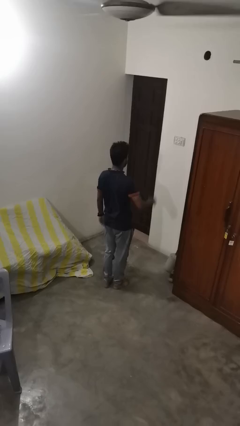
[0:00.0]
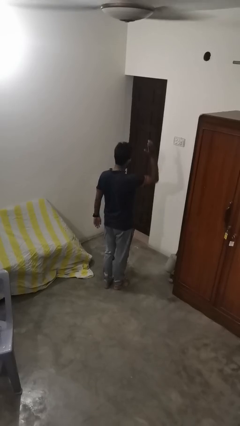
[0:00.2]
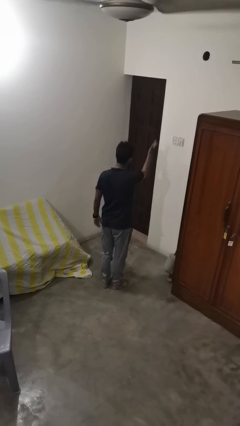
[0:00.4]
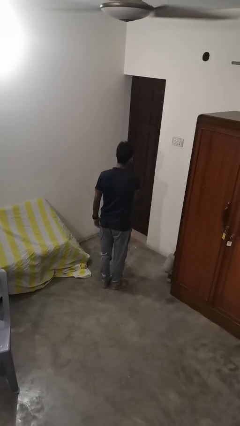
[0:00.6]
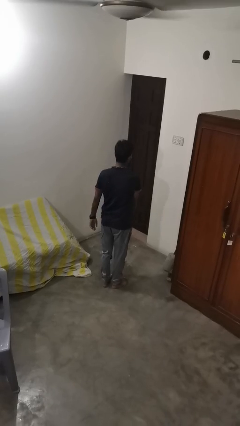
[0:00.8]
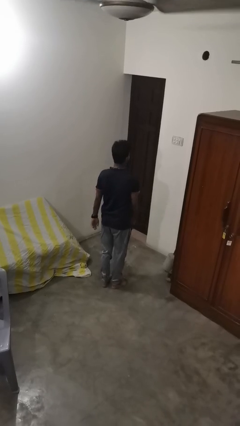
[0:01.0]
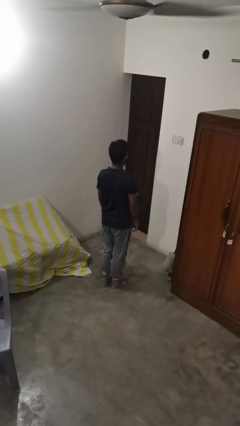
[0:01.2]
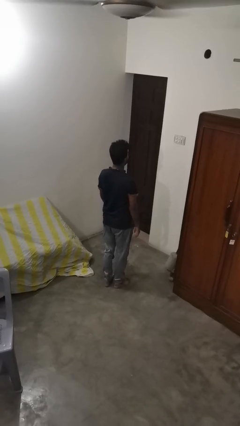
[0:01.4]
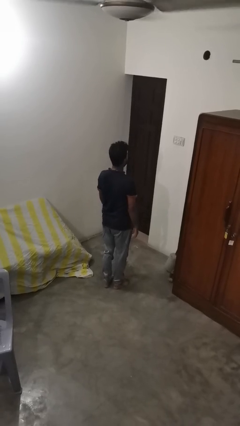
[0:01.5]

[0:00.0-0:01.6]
person karate chop

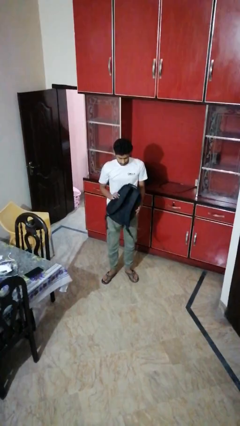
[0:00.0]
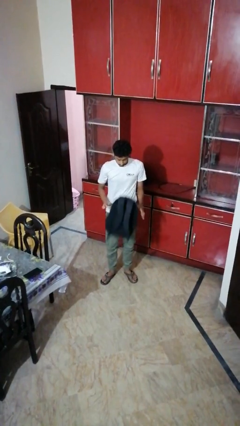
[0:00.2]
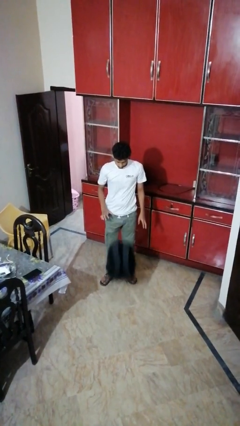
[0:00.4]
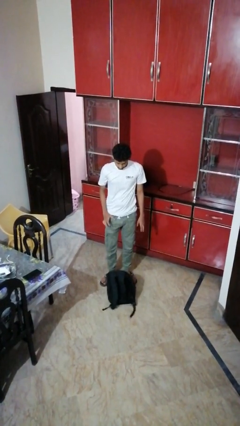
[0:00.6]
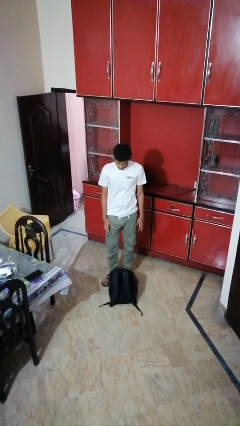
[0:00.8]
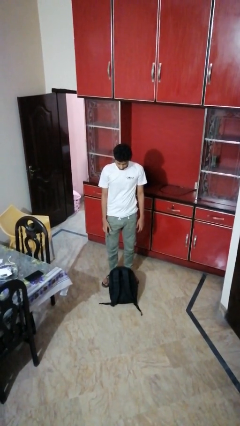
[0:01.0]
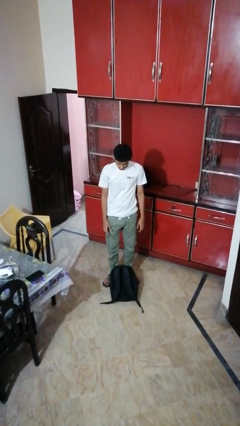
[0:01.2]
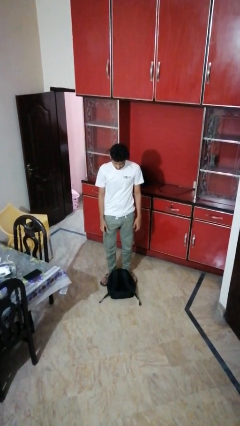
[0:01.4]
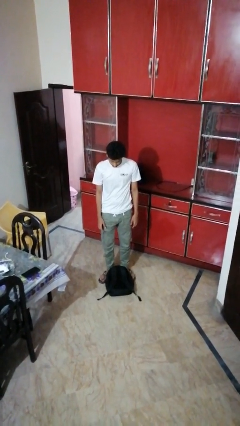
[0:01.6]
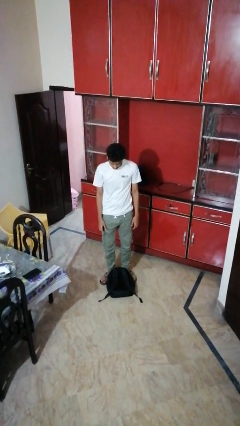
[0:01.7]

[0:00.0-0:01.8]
person drops object

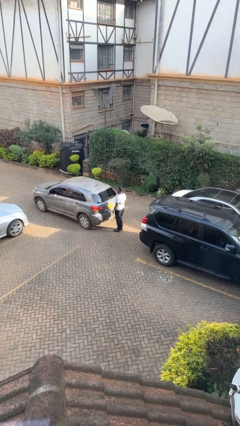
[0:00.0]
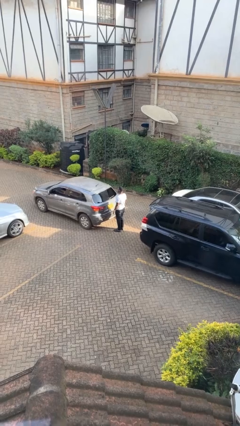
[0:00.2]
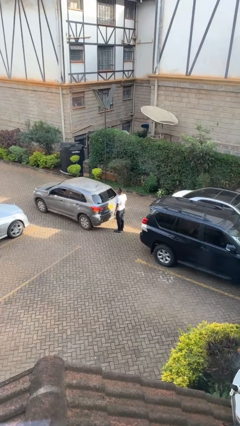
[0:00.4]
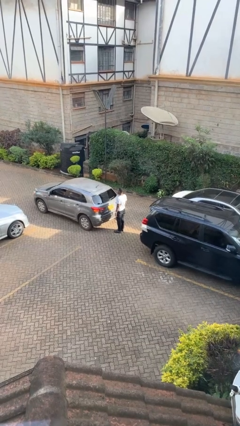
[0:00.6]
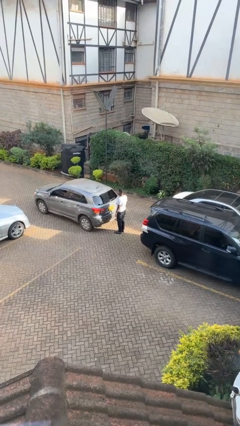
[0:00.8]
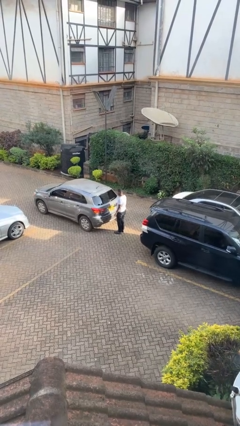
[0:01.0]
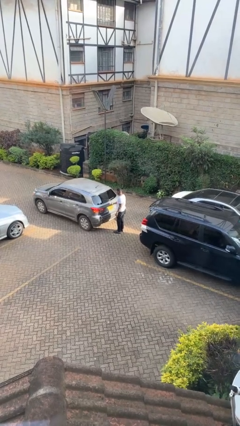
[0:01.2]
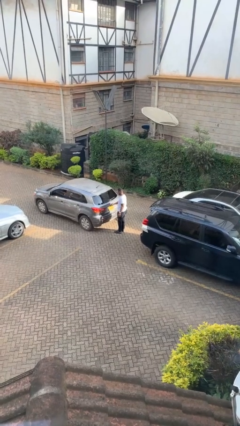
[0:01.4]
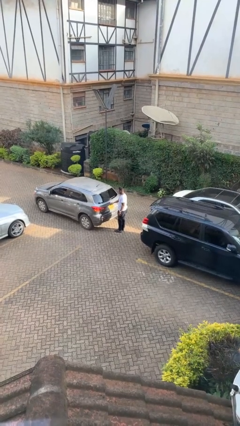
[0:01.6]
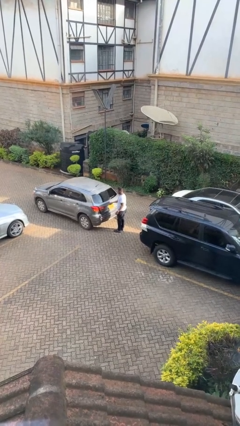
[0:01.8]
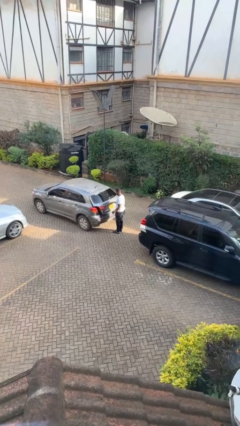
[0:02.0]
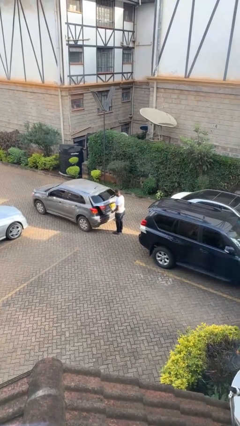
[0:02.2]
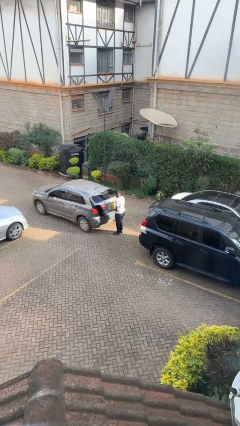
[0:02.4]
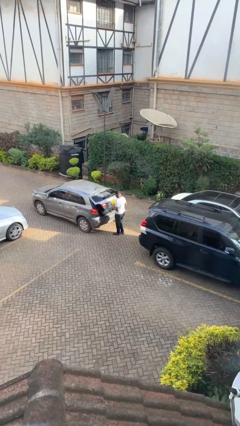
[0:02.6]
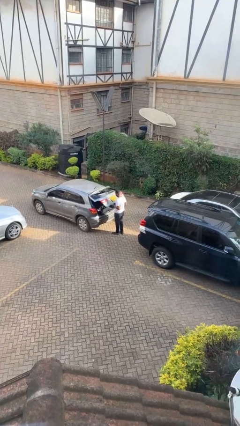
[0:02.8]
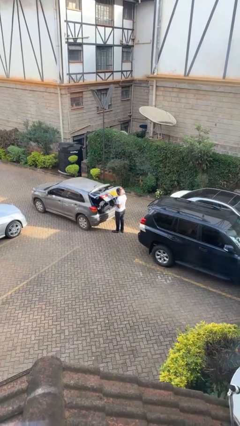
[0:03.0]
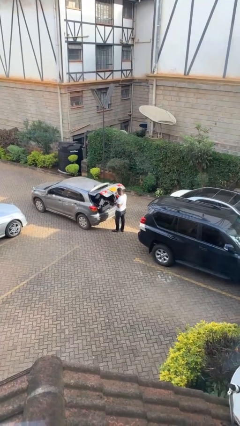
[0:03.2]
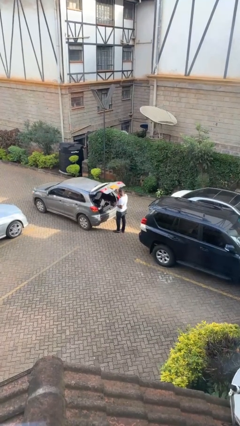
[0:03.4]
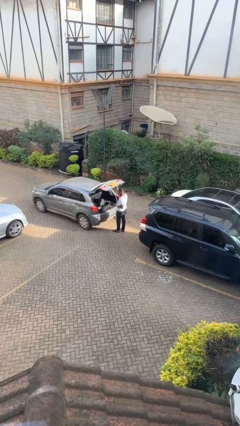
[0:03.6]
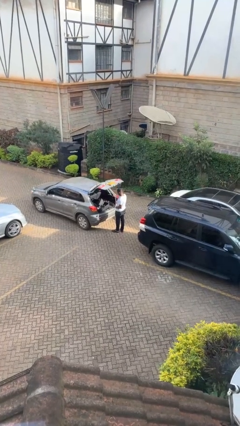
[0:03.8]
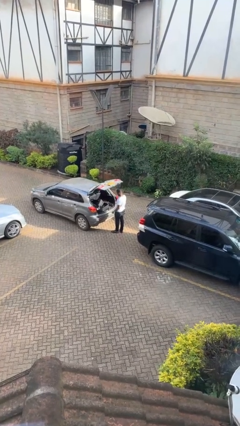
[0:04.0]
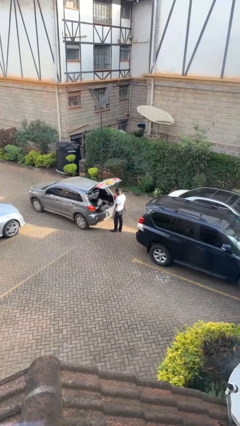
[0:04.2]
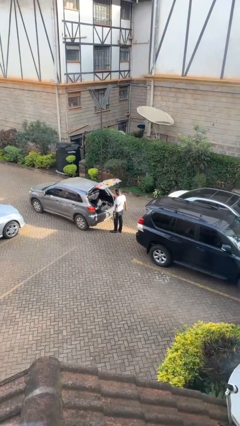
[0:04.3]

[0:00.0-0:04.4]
person opens car trunk

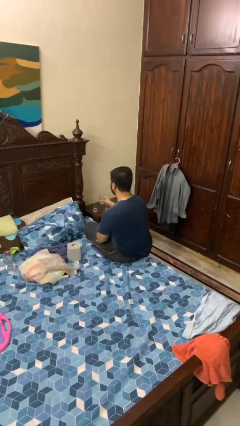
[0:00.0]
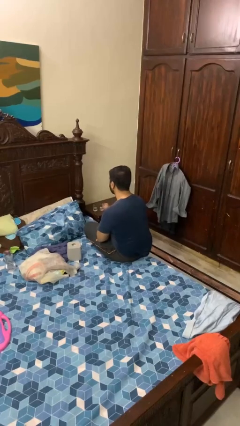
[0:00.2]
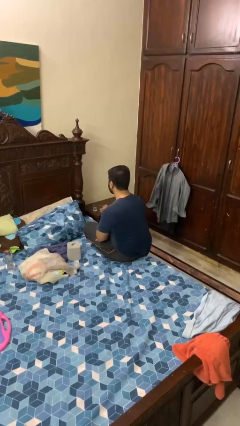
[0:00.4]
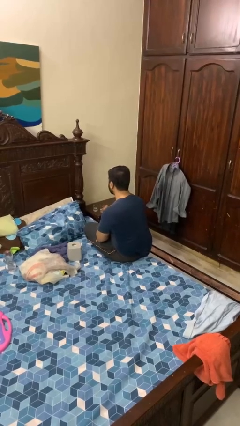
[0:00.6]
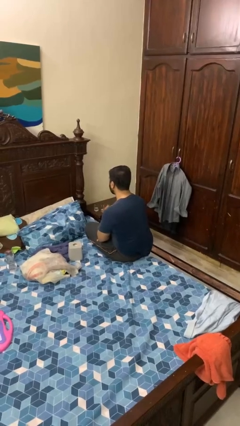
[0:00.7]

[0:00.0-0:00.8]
person puts down object on table

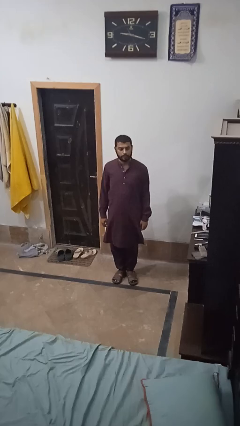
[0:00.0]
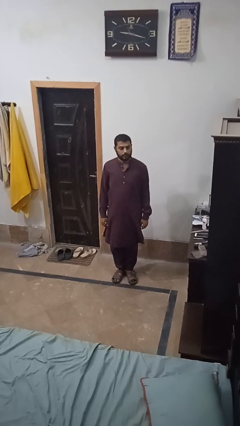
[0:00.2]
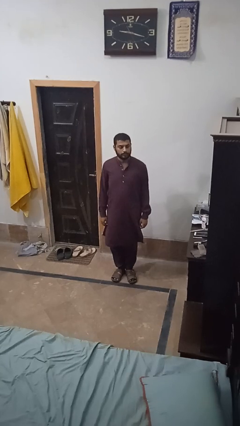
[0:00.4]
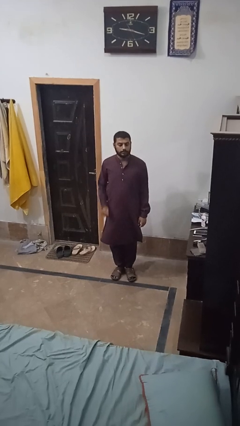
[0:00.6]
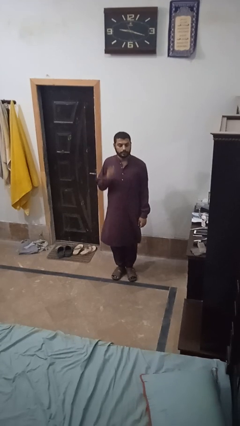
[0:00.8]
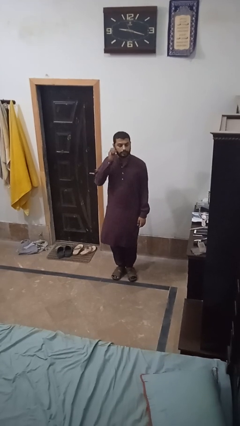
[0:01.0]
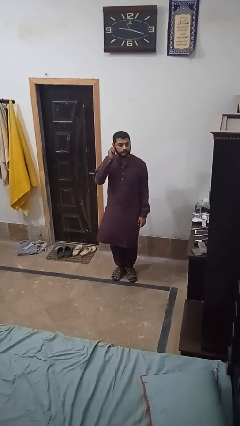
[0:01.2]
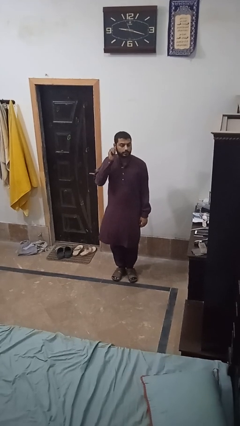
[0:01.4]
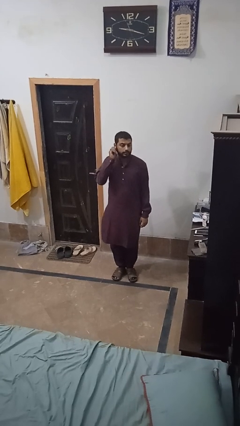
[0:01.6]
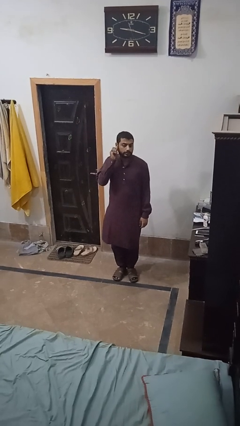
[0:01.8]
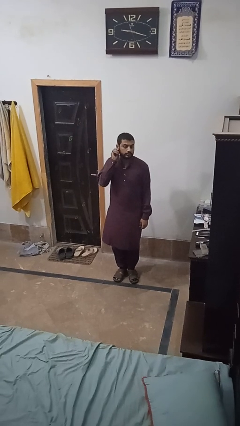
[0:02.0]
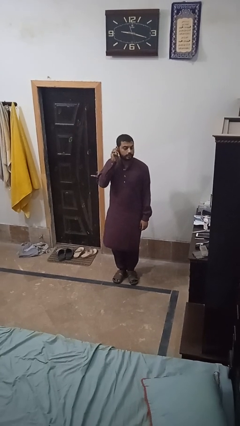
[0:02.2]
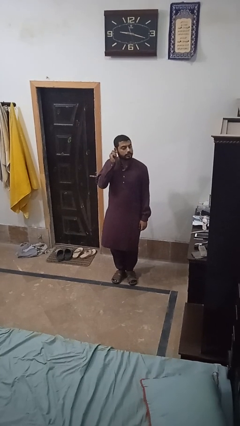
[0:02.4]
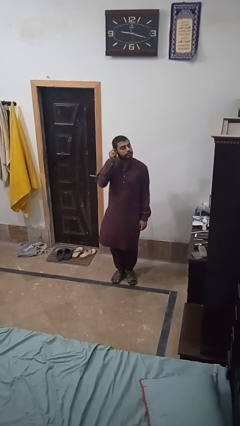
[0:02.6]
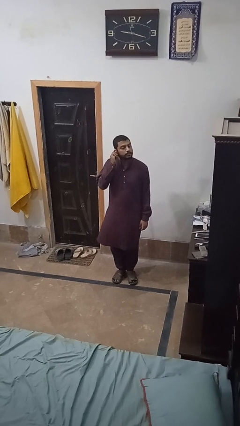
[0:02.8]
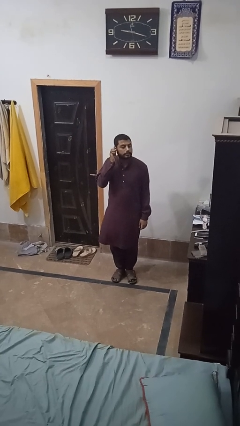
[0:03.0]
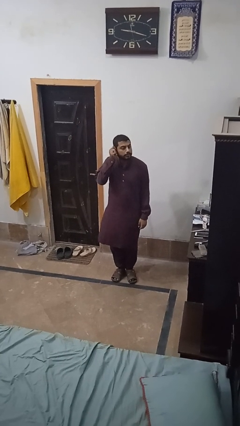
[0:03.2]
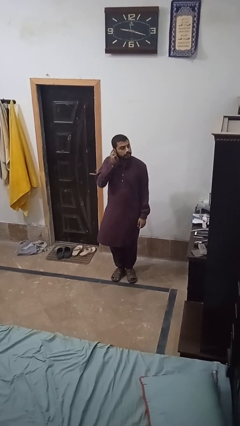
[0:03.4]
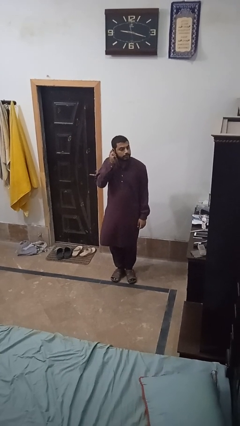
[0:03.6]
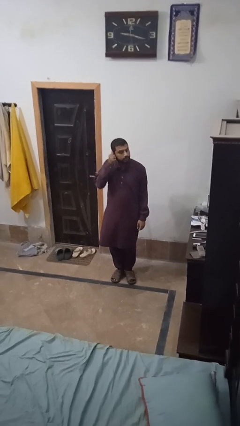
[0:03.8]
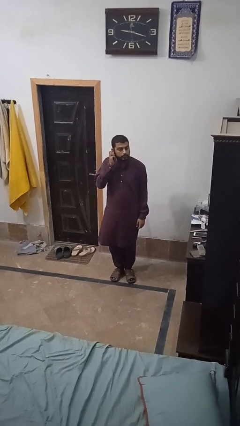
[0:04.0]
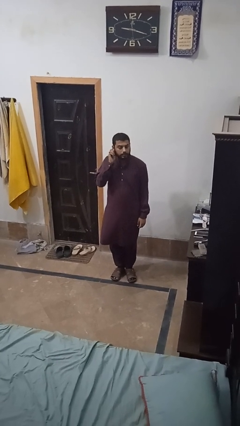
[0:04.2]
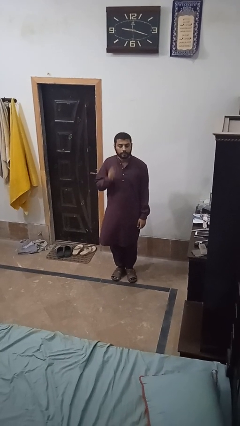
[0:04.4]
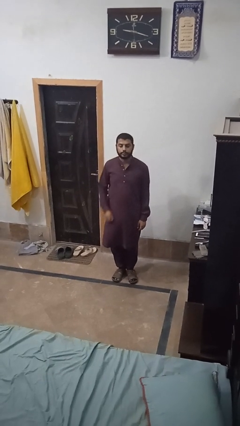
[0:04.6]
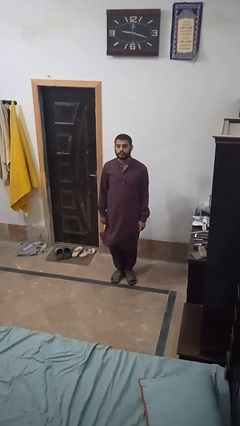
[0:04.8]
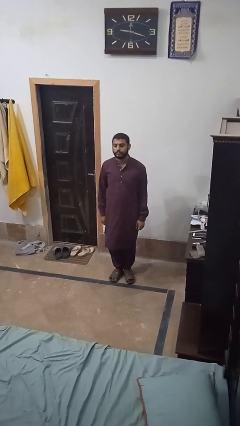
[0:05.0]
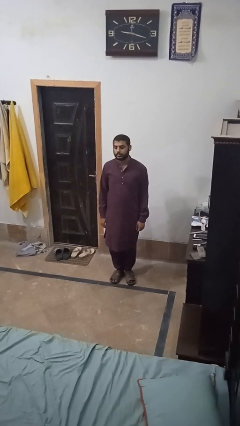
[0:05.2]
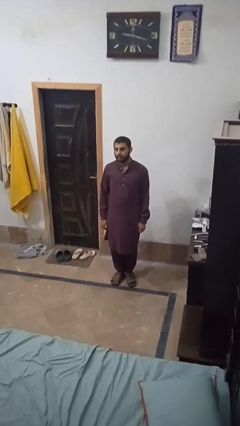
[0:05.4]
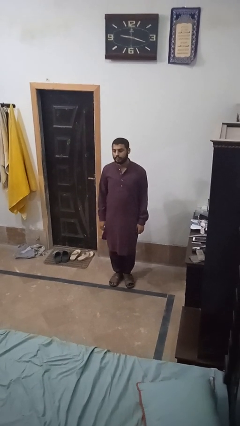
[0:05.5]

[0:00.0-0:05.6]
person touches earlobe

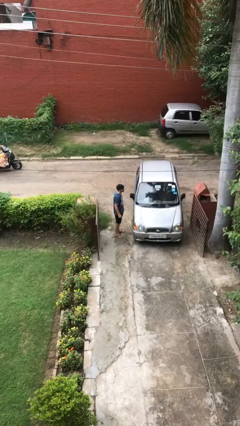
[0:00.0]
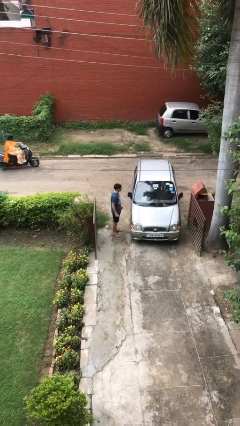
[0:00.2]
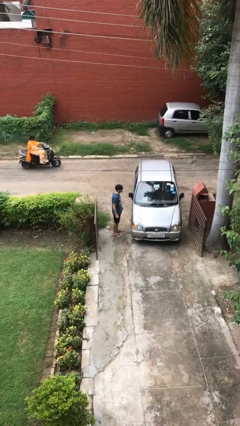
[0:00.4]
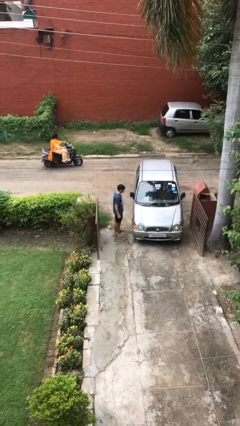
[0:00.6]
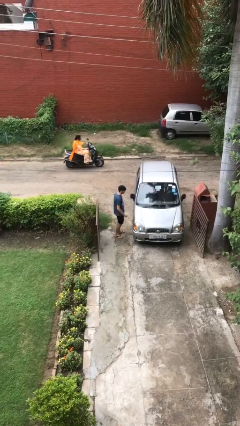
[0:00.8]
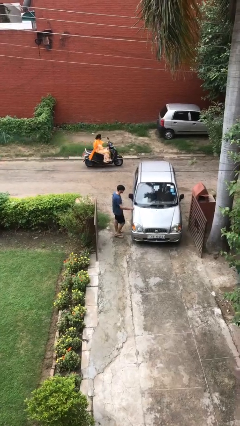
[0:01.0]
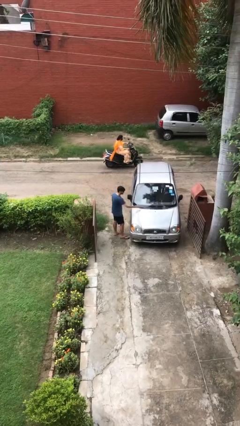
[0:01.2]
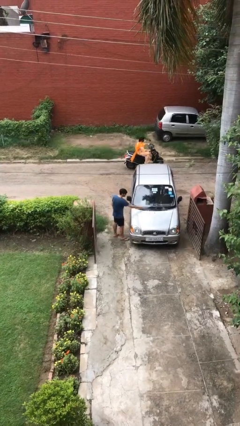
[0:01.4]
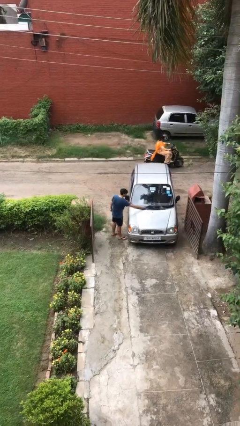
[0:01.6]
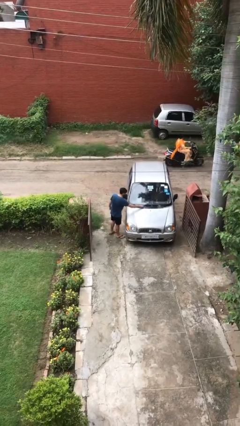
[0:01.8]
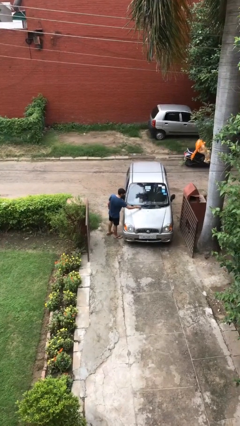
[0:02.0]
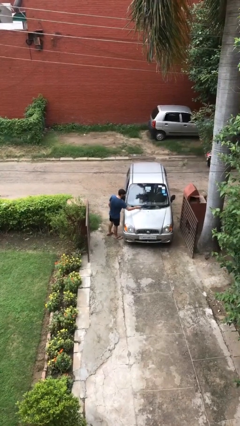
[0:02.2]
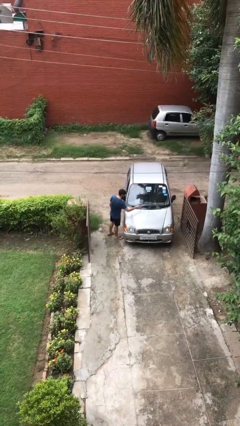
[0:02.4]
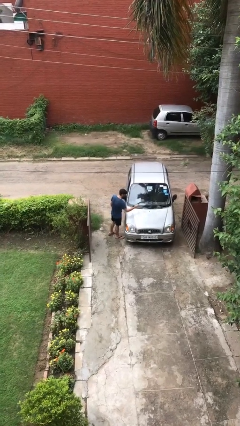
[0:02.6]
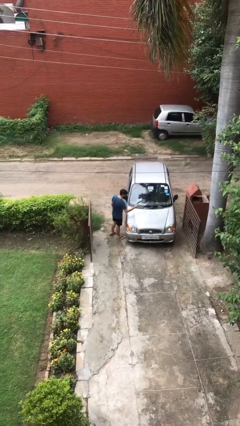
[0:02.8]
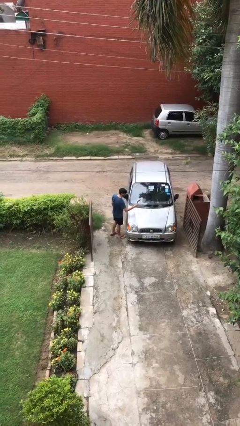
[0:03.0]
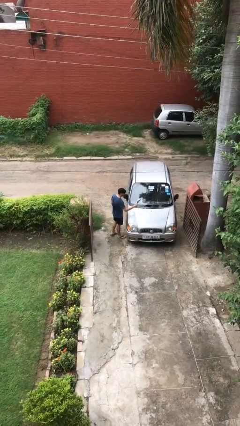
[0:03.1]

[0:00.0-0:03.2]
person flips up car wipers
